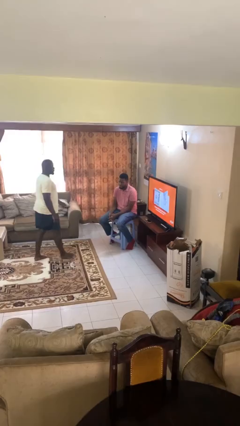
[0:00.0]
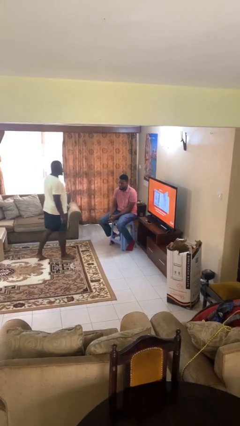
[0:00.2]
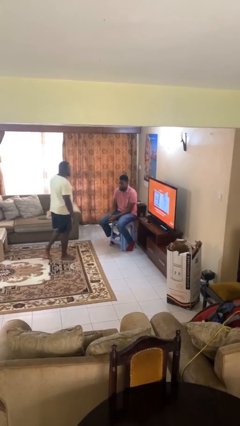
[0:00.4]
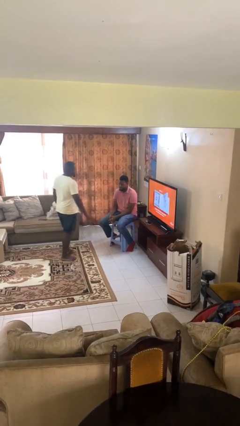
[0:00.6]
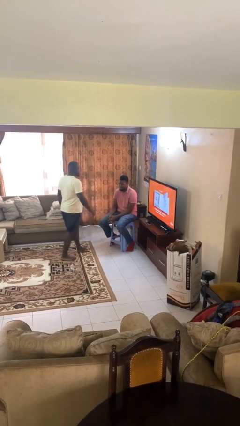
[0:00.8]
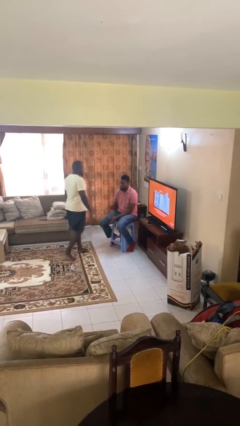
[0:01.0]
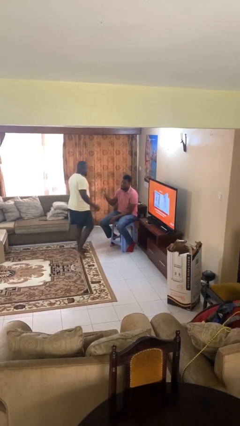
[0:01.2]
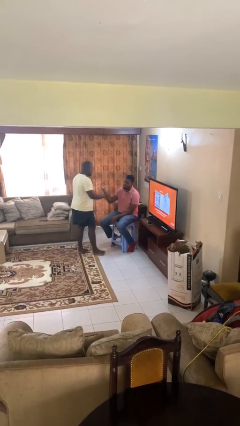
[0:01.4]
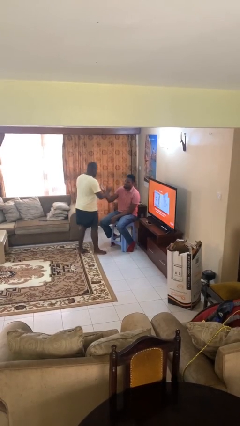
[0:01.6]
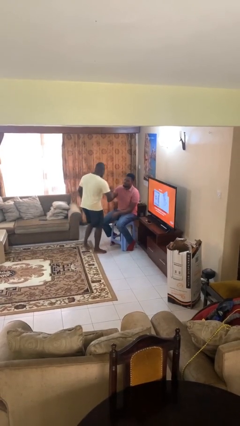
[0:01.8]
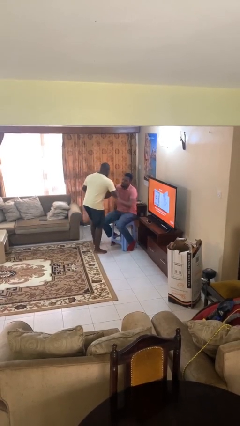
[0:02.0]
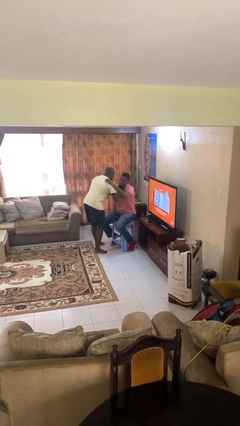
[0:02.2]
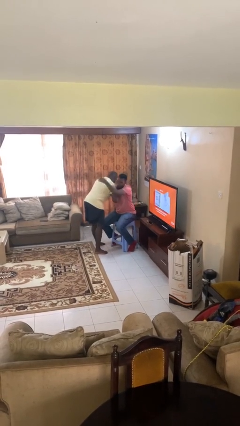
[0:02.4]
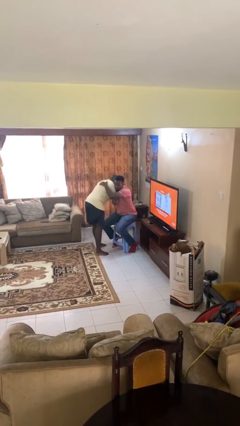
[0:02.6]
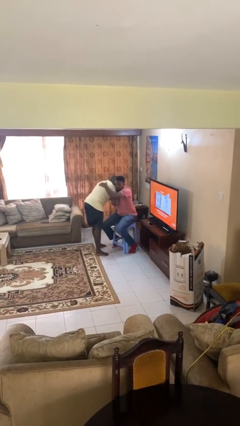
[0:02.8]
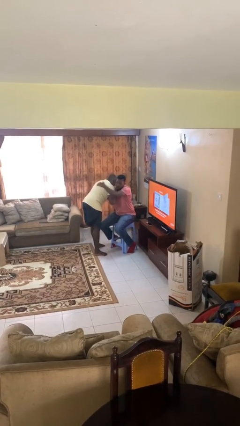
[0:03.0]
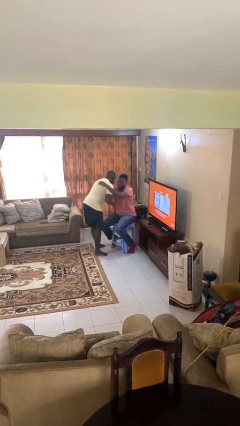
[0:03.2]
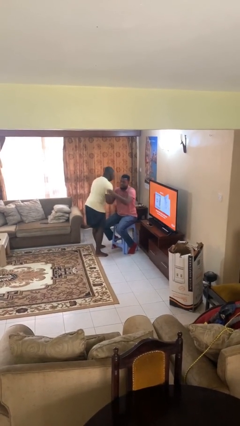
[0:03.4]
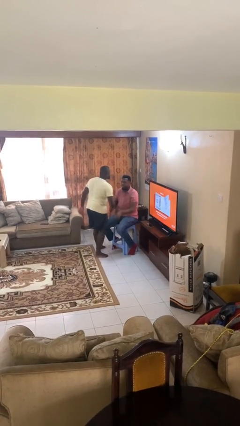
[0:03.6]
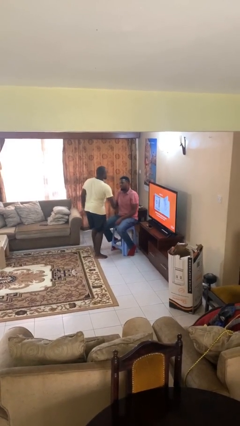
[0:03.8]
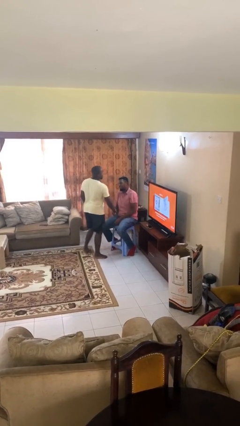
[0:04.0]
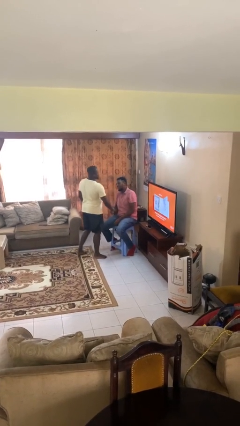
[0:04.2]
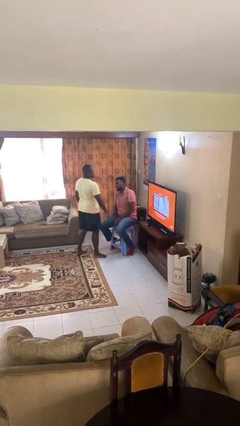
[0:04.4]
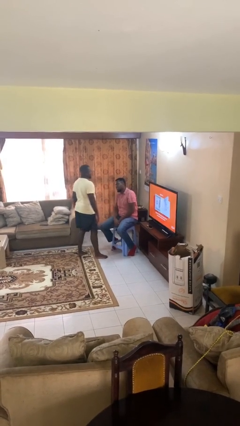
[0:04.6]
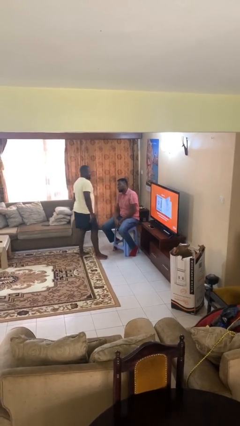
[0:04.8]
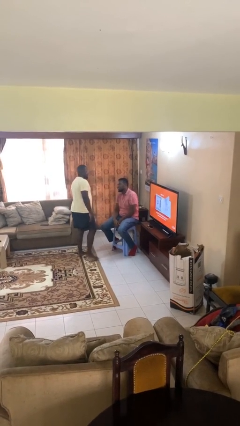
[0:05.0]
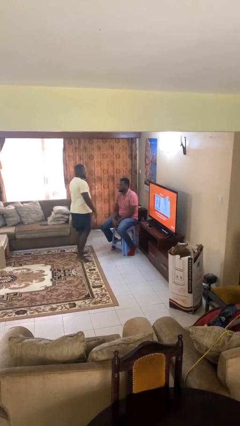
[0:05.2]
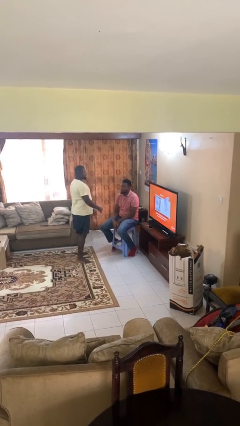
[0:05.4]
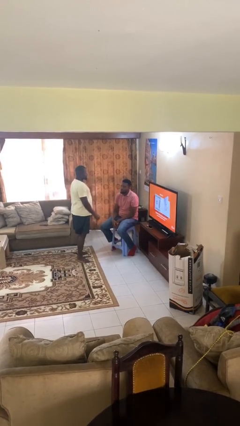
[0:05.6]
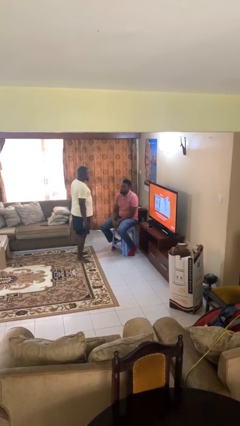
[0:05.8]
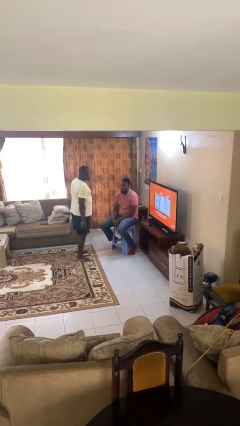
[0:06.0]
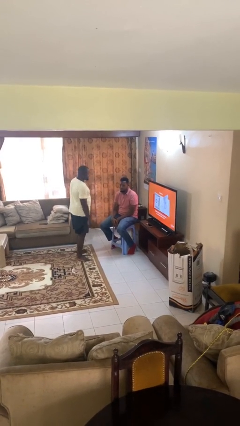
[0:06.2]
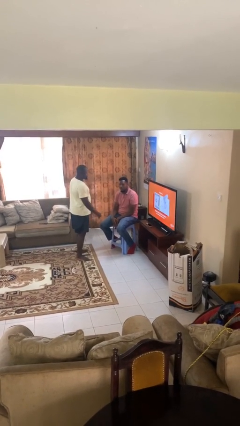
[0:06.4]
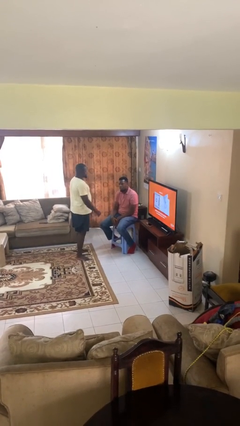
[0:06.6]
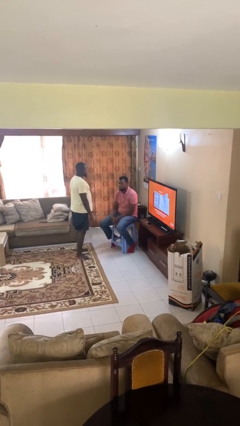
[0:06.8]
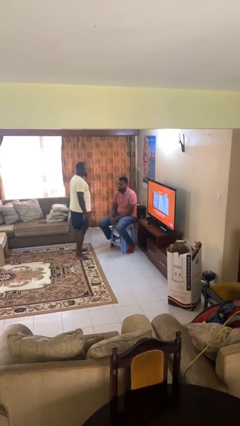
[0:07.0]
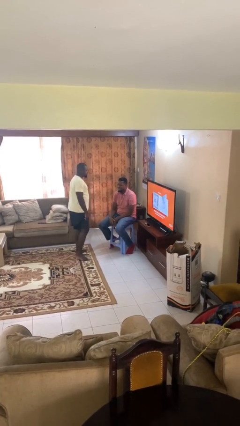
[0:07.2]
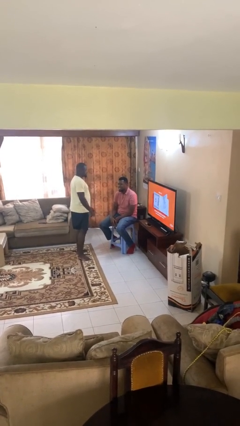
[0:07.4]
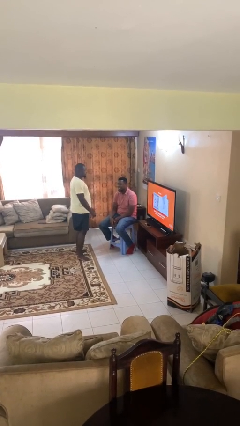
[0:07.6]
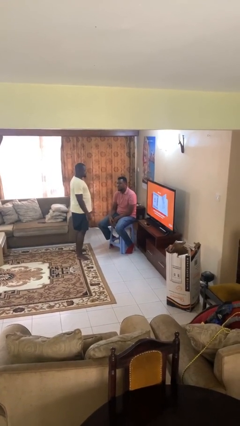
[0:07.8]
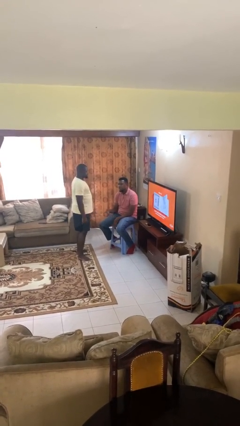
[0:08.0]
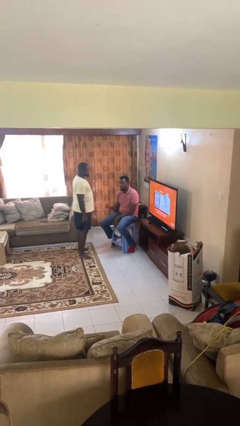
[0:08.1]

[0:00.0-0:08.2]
person embraces person

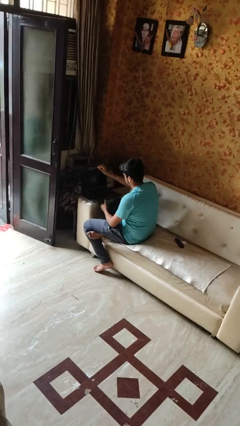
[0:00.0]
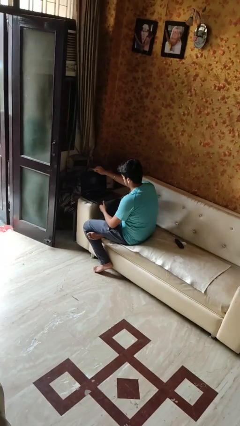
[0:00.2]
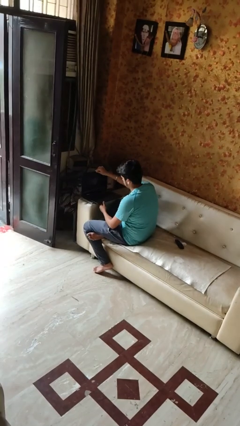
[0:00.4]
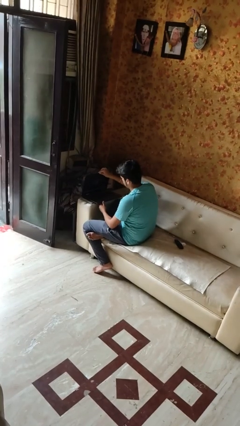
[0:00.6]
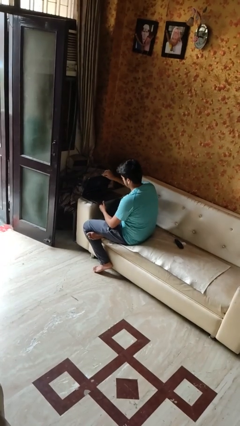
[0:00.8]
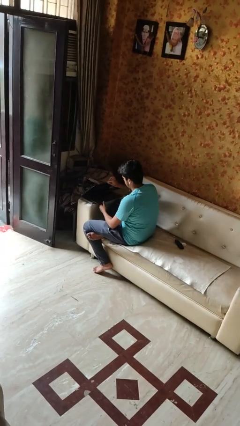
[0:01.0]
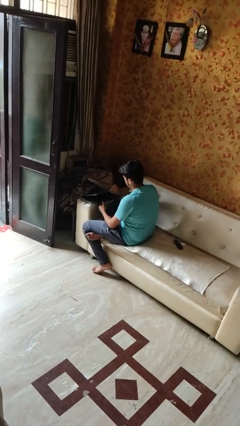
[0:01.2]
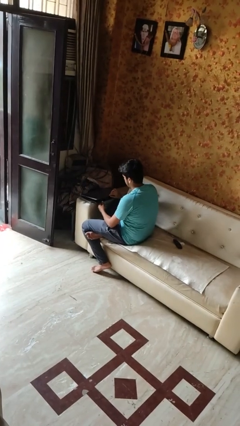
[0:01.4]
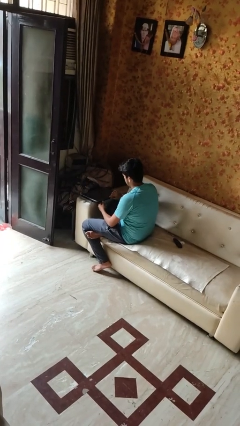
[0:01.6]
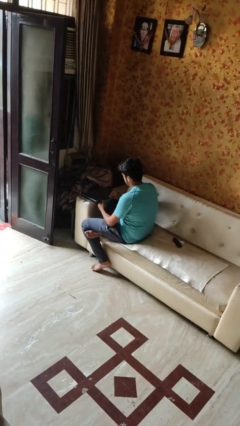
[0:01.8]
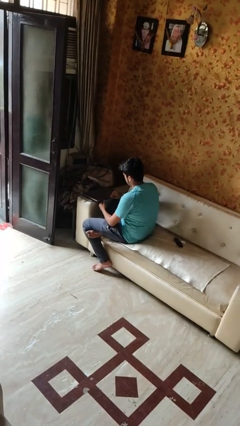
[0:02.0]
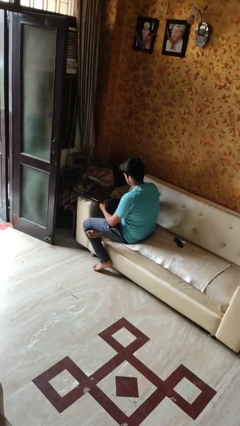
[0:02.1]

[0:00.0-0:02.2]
person closes laptop

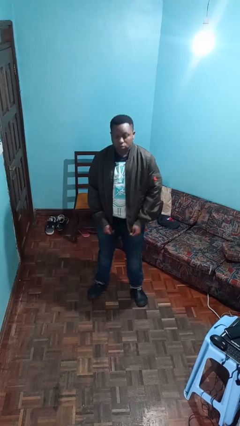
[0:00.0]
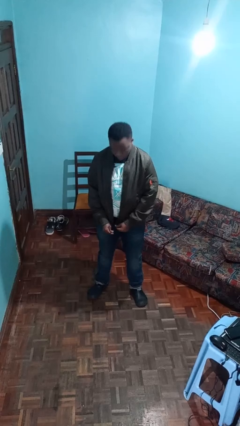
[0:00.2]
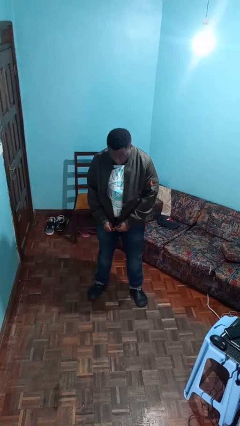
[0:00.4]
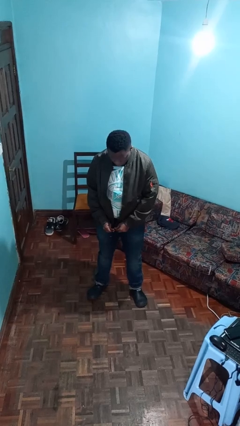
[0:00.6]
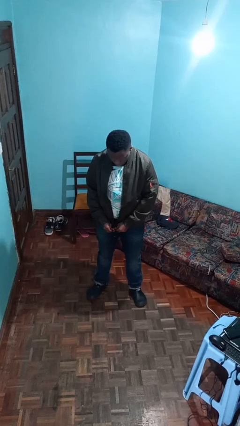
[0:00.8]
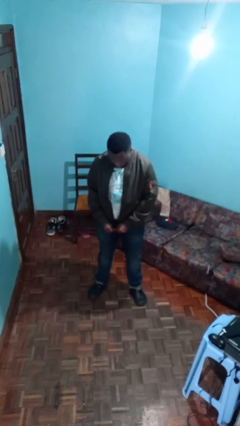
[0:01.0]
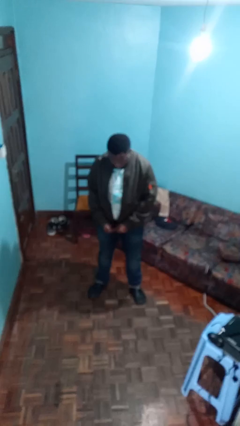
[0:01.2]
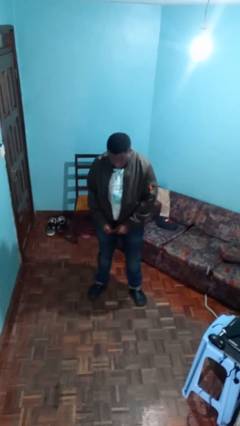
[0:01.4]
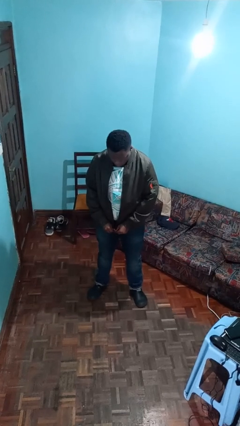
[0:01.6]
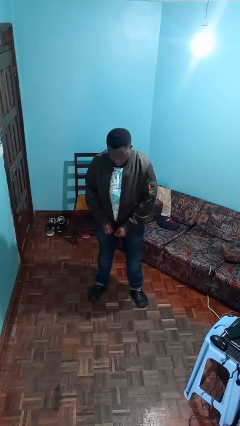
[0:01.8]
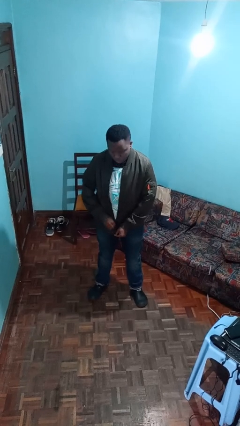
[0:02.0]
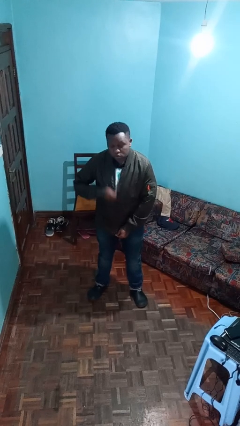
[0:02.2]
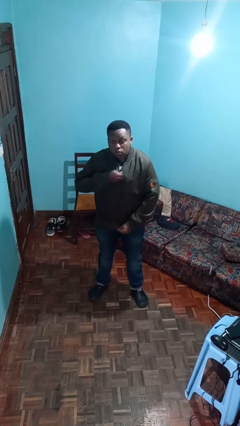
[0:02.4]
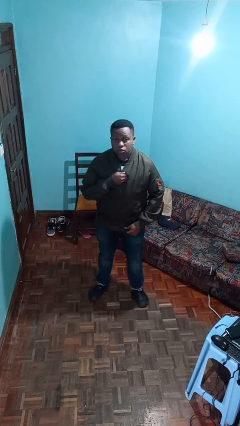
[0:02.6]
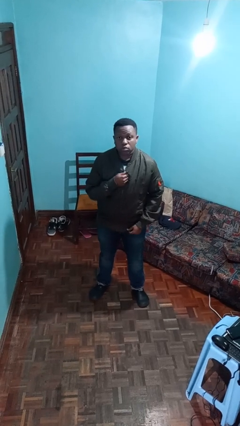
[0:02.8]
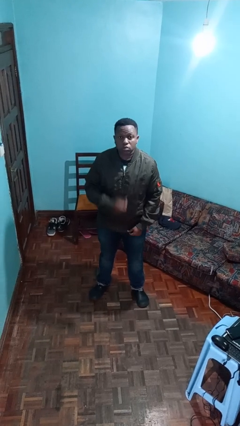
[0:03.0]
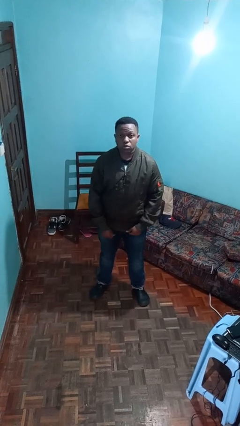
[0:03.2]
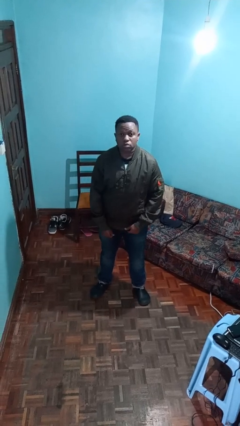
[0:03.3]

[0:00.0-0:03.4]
person zips up jacket

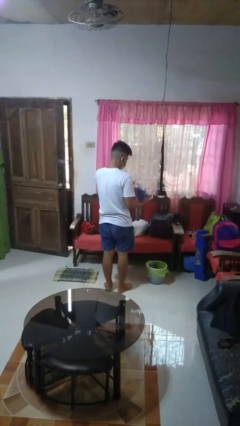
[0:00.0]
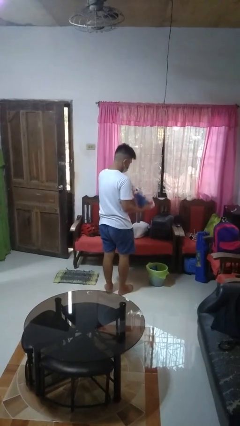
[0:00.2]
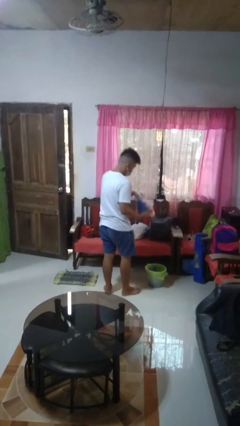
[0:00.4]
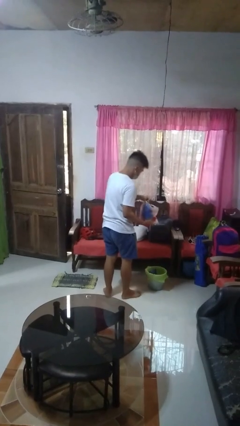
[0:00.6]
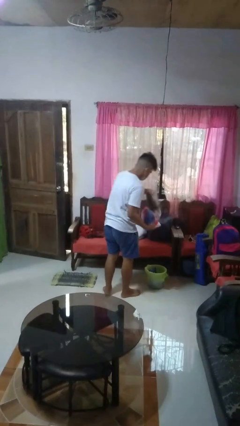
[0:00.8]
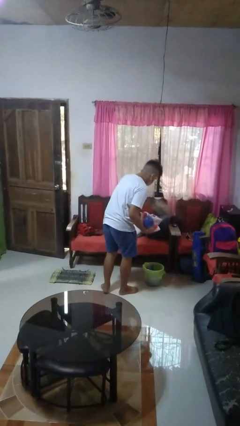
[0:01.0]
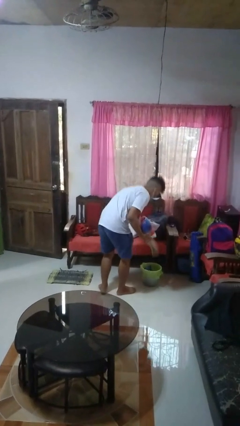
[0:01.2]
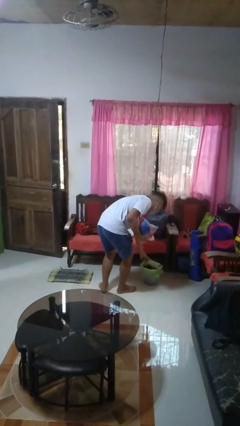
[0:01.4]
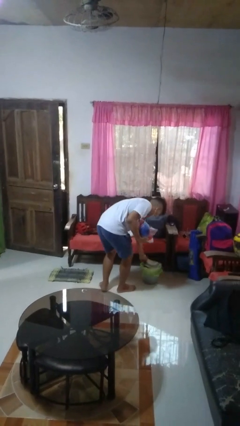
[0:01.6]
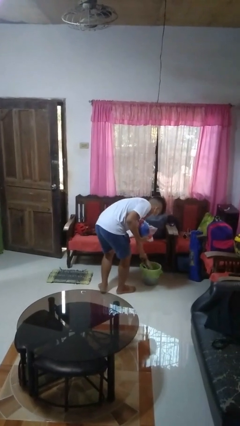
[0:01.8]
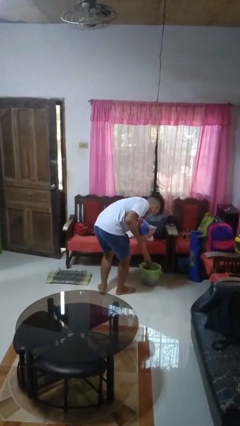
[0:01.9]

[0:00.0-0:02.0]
person discards trash

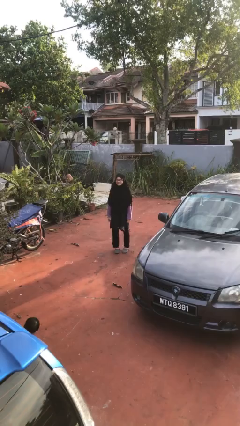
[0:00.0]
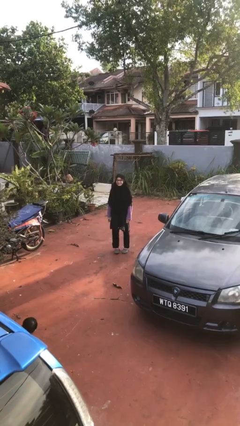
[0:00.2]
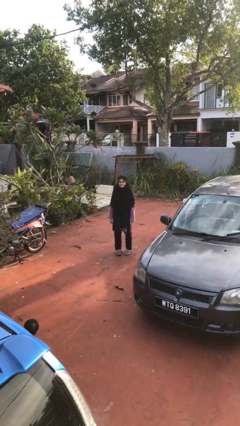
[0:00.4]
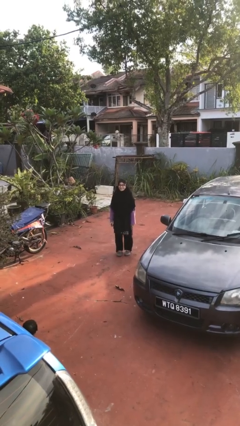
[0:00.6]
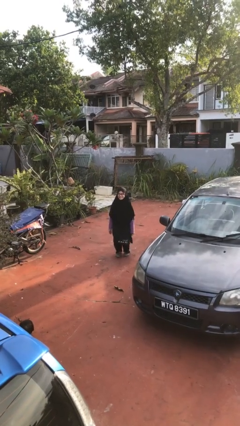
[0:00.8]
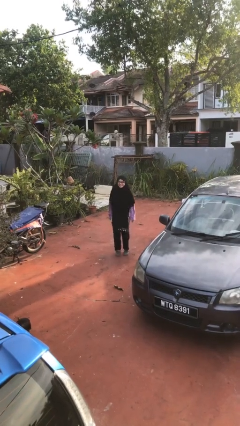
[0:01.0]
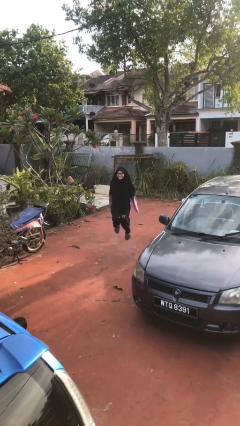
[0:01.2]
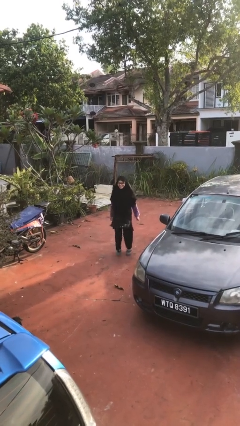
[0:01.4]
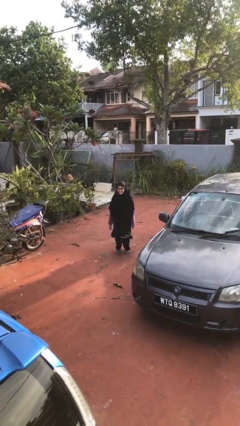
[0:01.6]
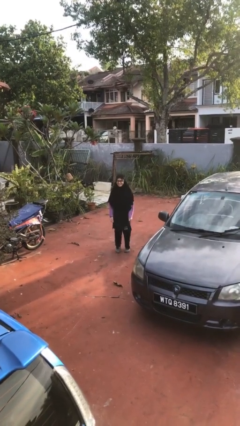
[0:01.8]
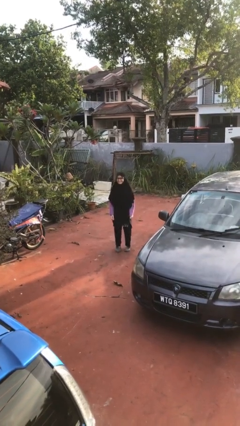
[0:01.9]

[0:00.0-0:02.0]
person jumps
